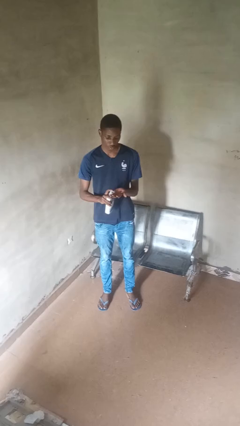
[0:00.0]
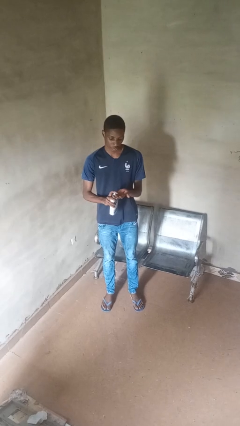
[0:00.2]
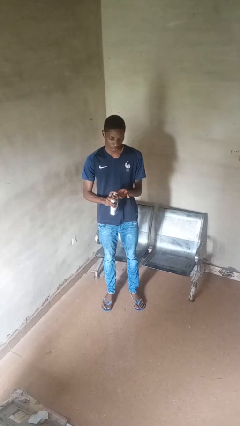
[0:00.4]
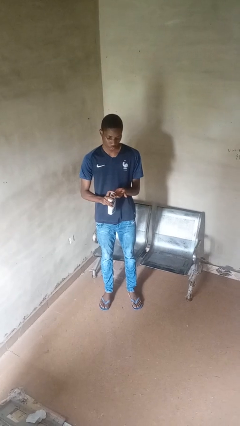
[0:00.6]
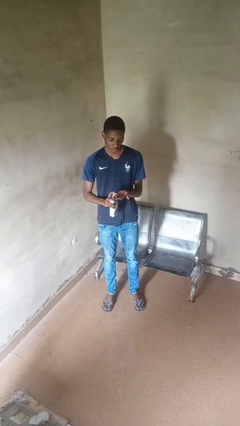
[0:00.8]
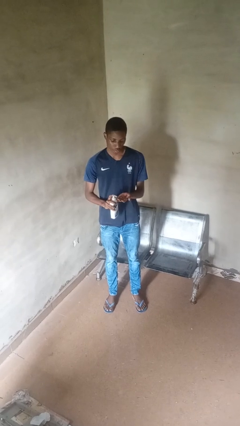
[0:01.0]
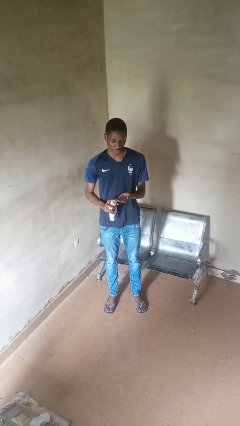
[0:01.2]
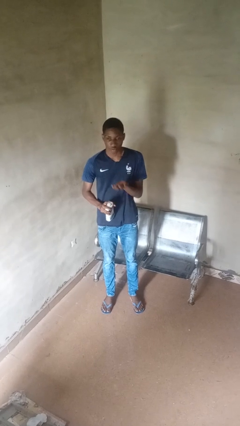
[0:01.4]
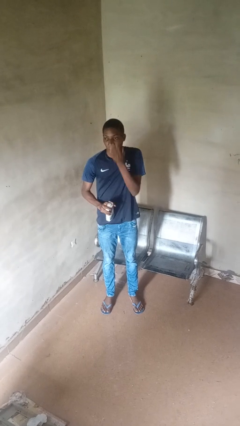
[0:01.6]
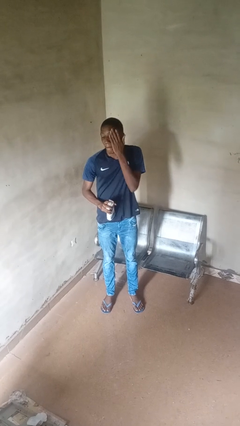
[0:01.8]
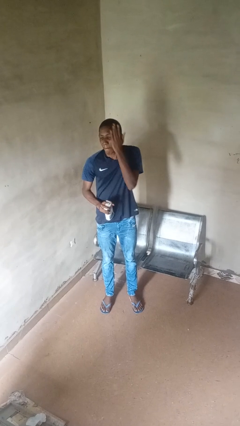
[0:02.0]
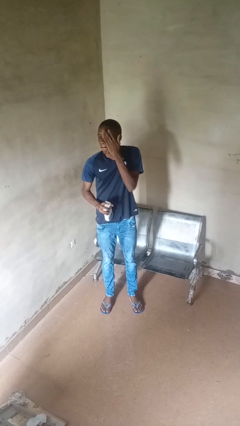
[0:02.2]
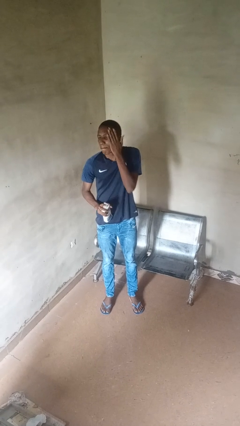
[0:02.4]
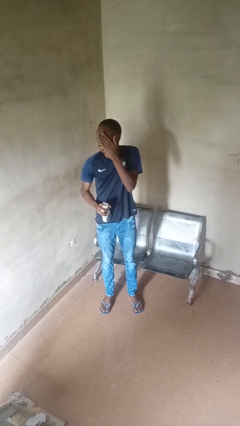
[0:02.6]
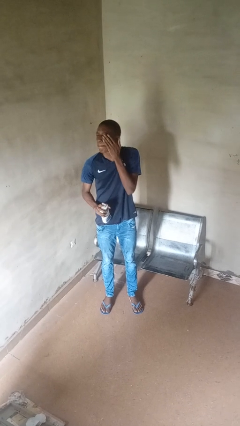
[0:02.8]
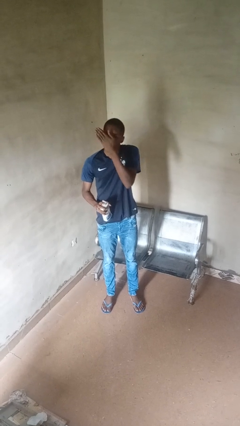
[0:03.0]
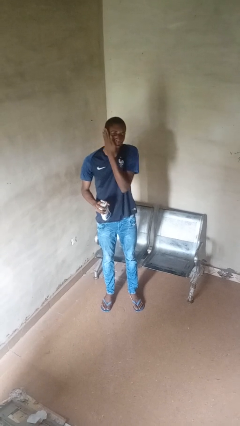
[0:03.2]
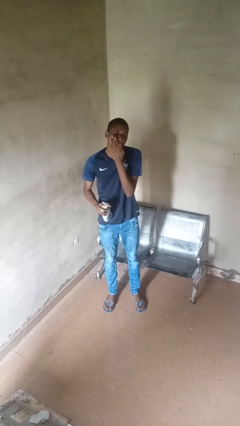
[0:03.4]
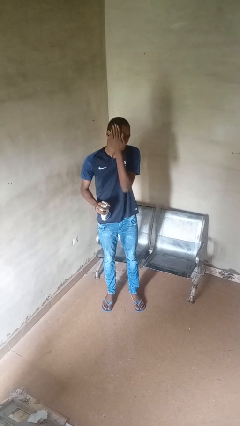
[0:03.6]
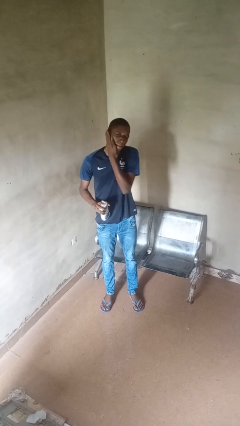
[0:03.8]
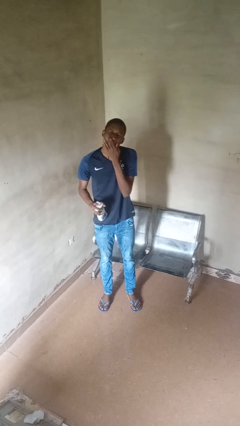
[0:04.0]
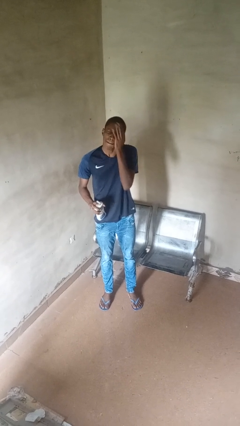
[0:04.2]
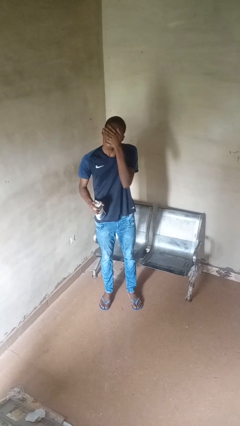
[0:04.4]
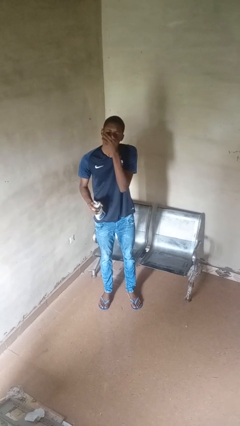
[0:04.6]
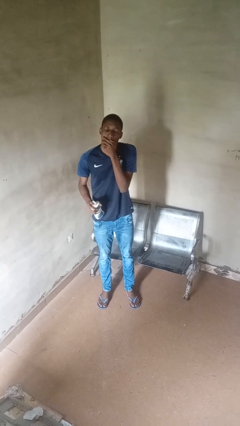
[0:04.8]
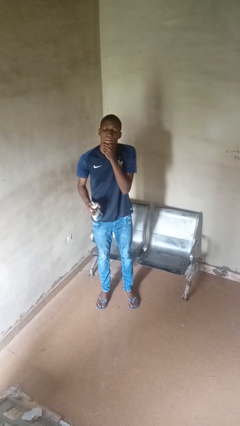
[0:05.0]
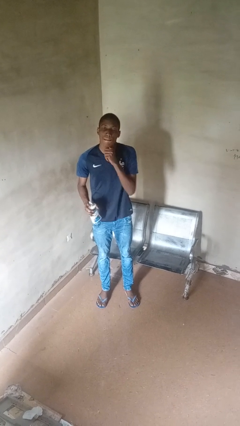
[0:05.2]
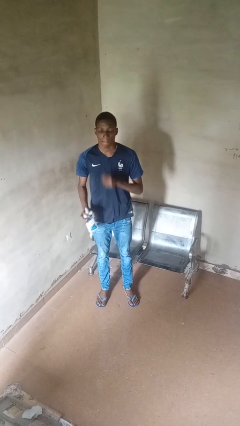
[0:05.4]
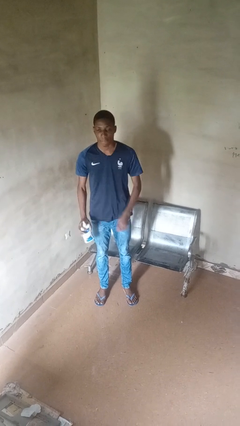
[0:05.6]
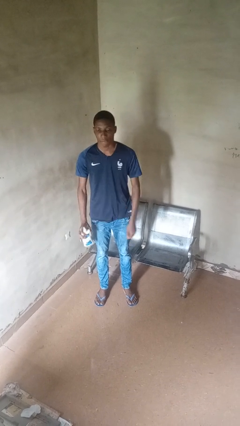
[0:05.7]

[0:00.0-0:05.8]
person applies facial moisturizer

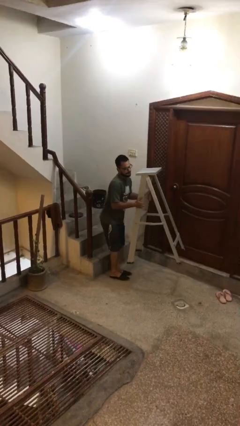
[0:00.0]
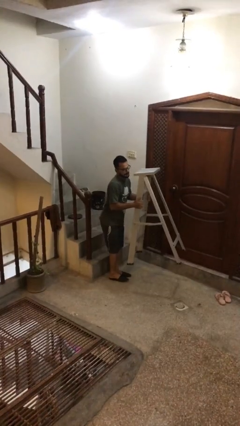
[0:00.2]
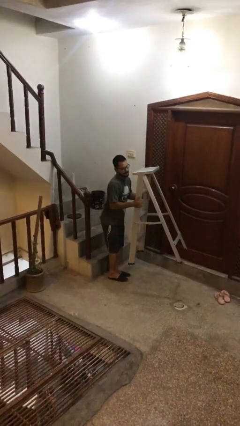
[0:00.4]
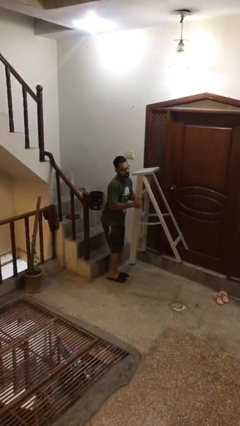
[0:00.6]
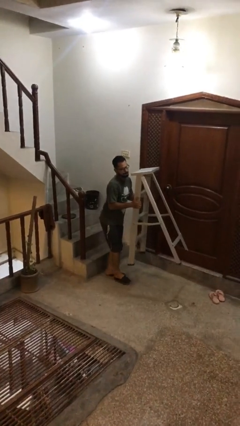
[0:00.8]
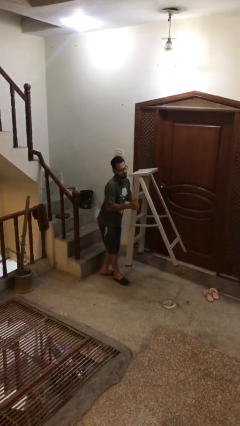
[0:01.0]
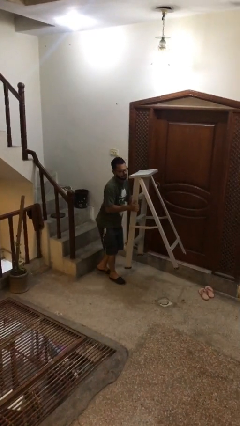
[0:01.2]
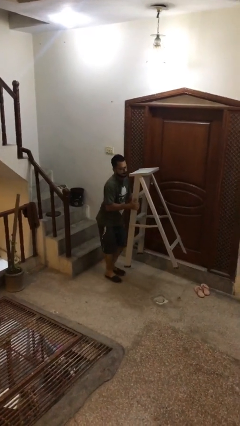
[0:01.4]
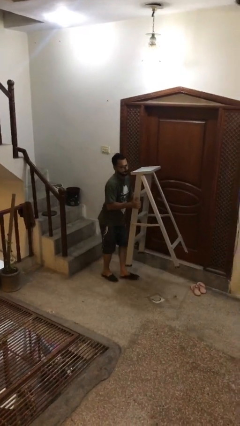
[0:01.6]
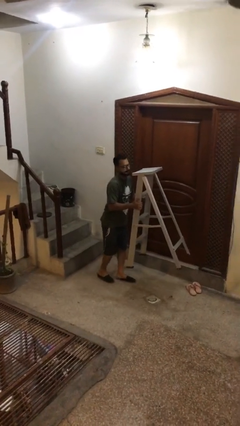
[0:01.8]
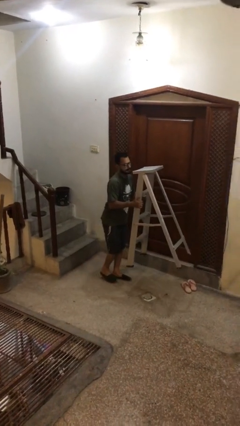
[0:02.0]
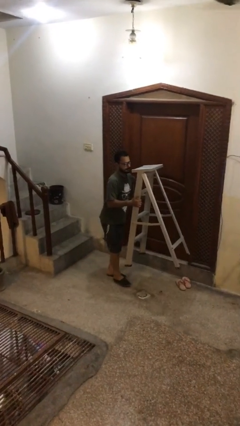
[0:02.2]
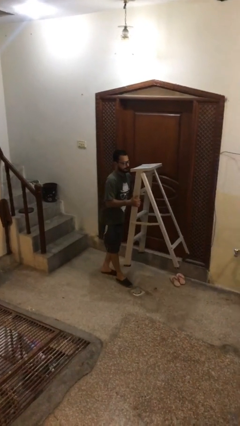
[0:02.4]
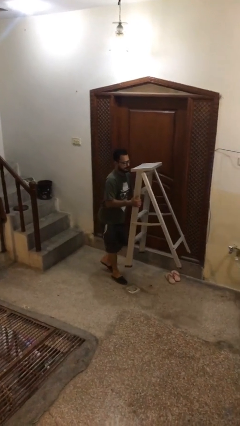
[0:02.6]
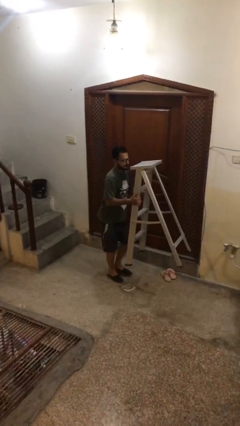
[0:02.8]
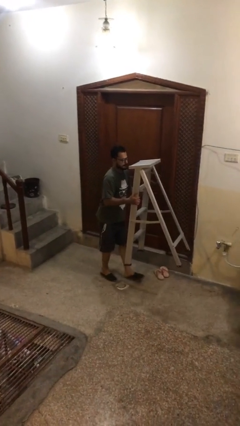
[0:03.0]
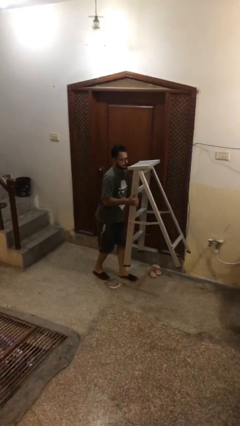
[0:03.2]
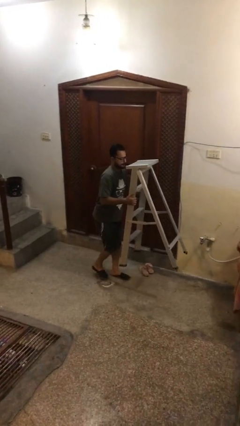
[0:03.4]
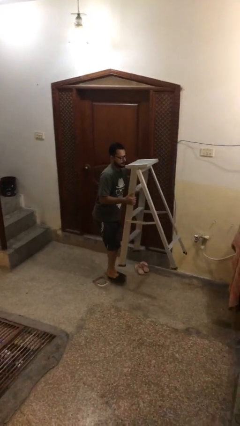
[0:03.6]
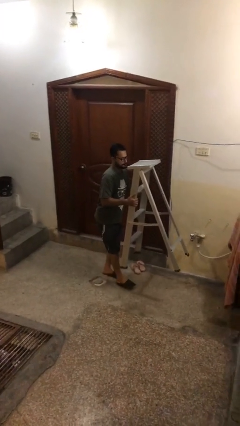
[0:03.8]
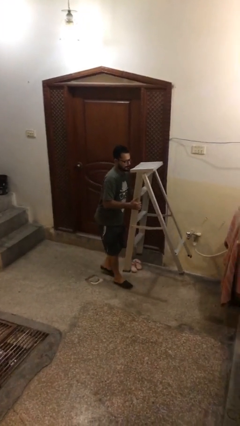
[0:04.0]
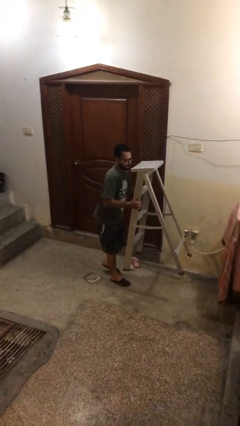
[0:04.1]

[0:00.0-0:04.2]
person carries heavy object

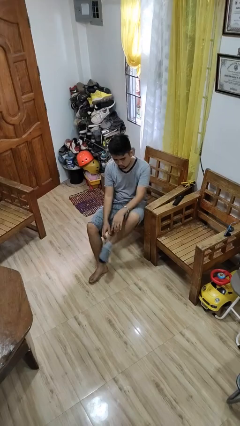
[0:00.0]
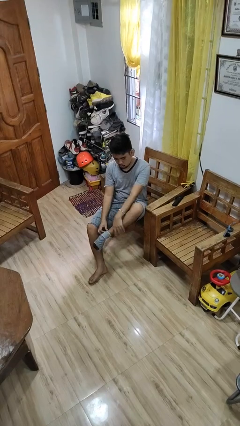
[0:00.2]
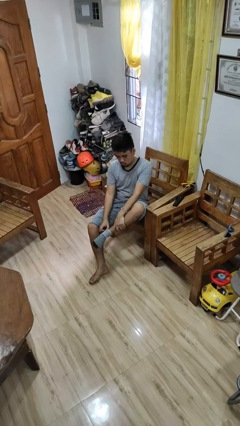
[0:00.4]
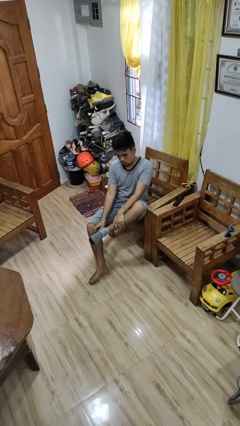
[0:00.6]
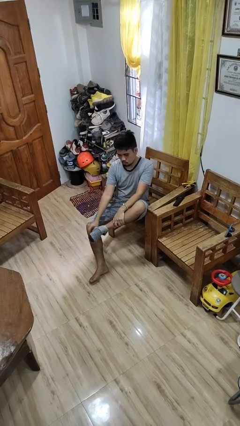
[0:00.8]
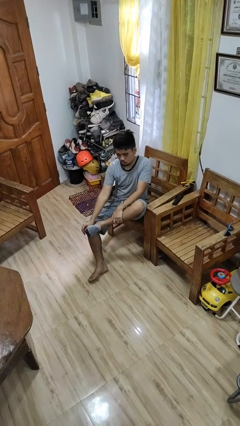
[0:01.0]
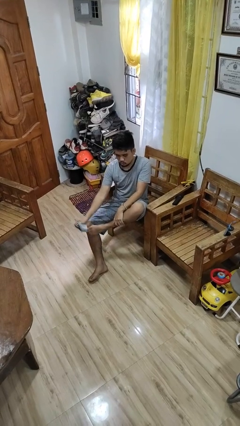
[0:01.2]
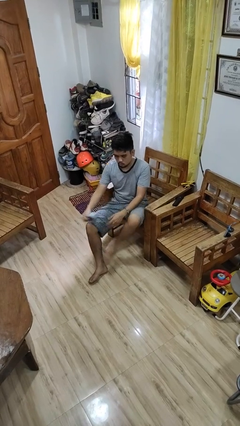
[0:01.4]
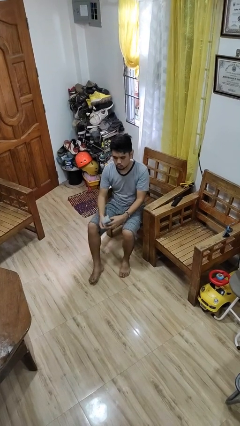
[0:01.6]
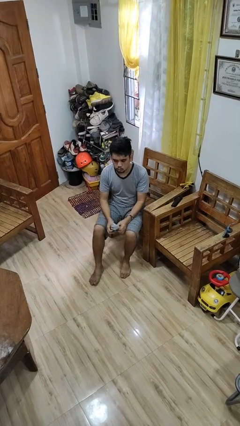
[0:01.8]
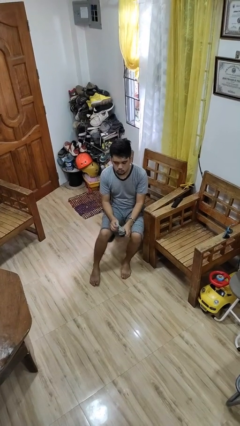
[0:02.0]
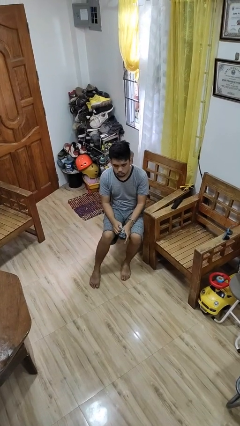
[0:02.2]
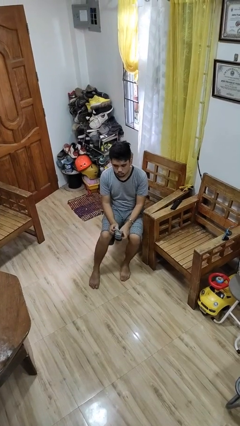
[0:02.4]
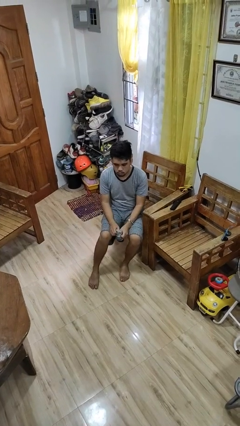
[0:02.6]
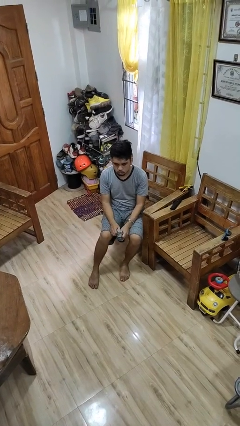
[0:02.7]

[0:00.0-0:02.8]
person takes off socks

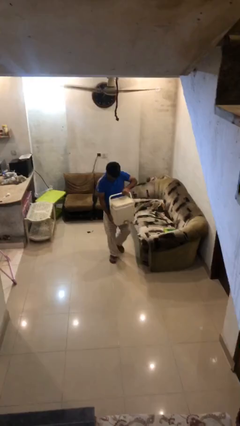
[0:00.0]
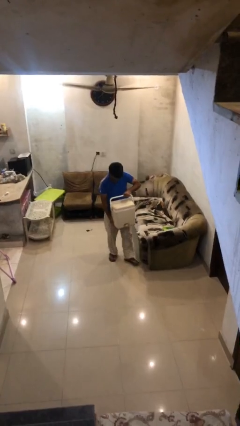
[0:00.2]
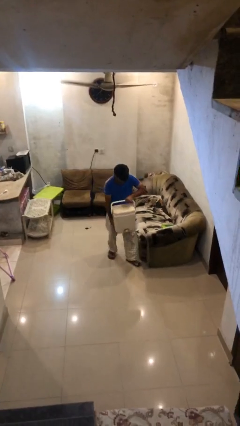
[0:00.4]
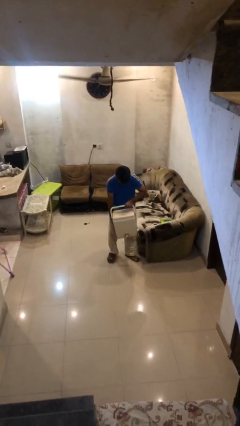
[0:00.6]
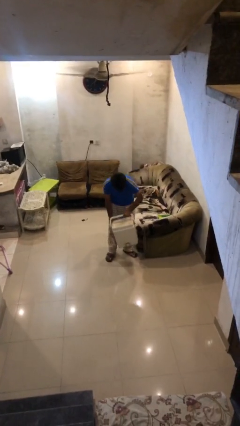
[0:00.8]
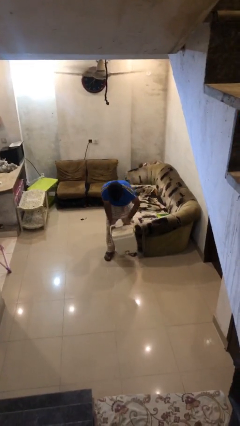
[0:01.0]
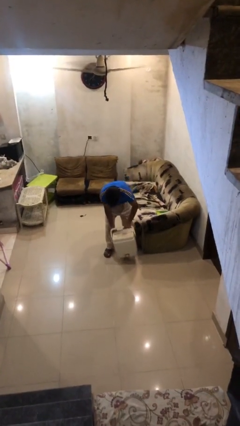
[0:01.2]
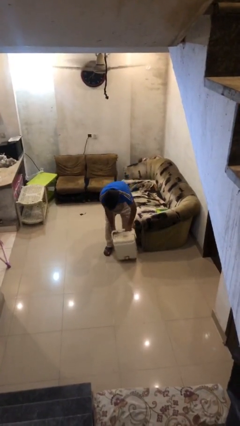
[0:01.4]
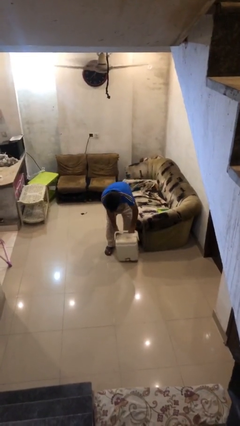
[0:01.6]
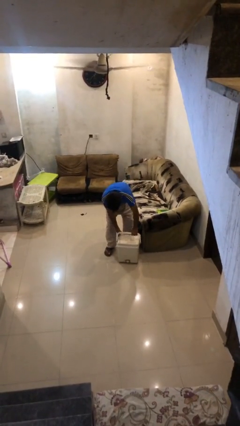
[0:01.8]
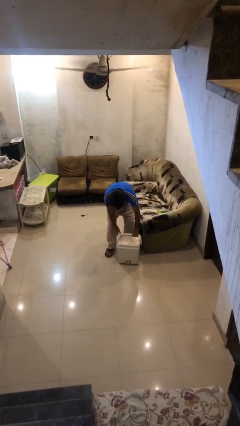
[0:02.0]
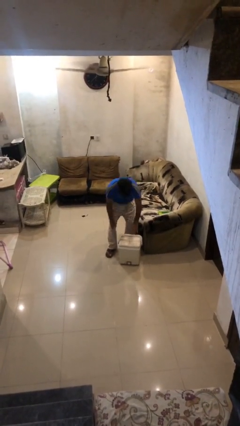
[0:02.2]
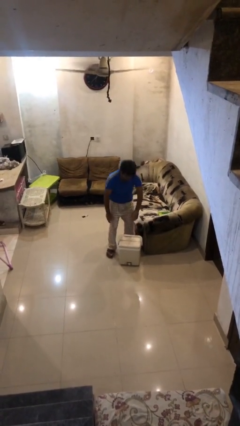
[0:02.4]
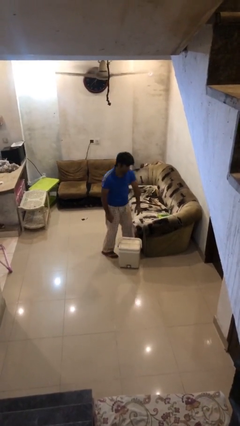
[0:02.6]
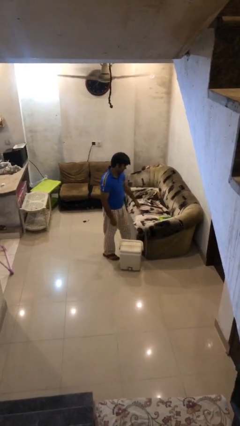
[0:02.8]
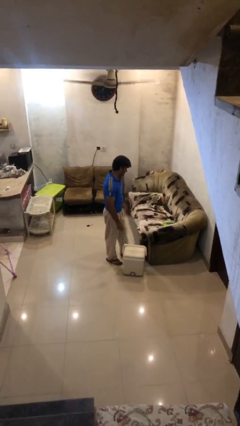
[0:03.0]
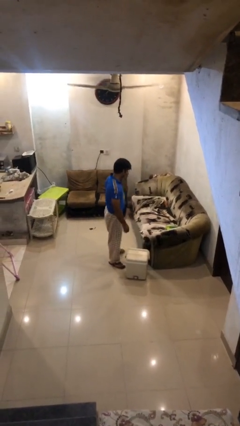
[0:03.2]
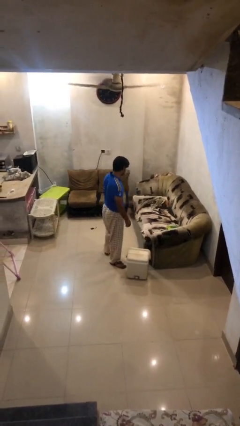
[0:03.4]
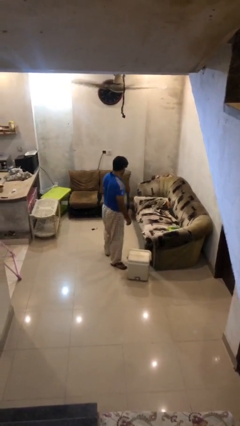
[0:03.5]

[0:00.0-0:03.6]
person puts down object on floor

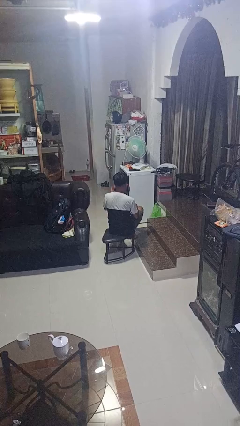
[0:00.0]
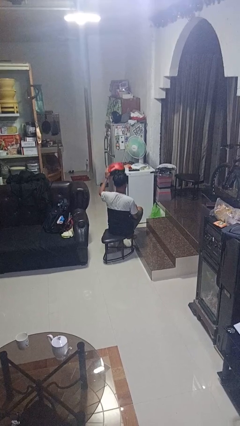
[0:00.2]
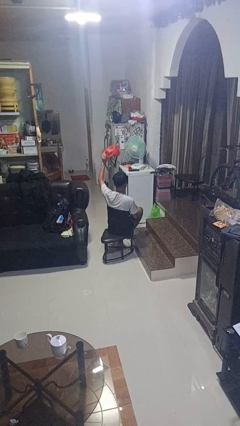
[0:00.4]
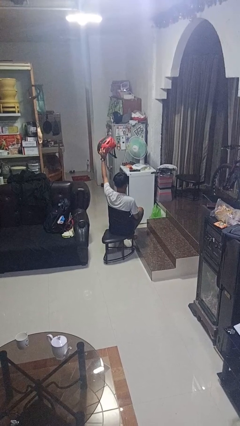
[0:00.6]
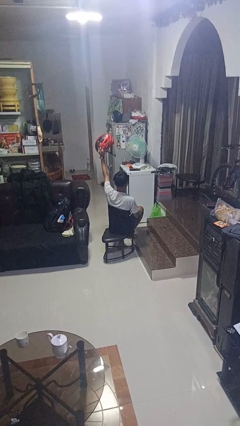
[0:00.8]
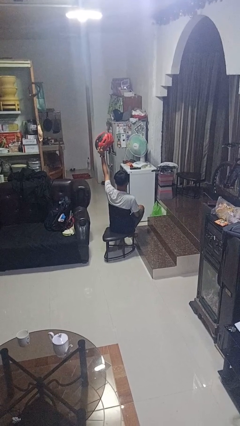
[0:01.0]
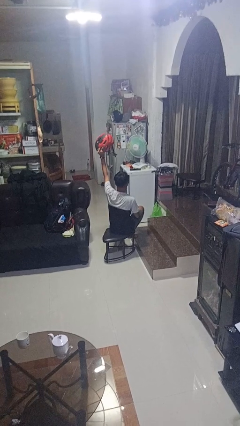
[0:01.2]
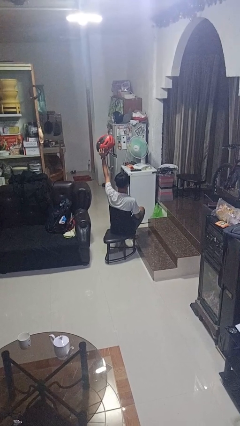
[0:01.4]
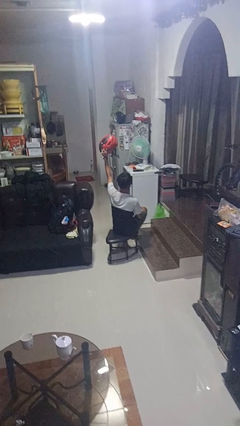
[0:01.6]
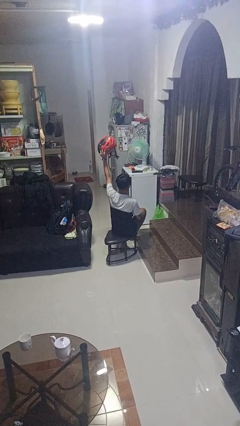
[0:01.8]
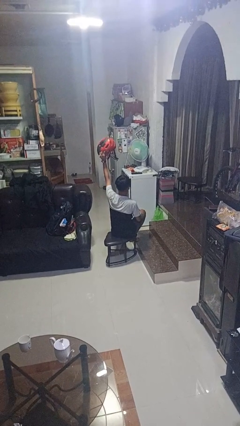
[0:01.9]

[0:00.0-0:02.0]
person holds object above head
